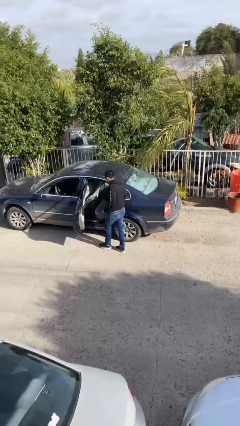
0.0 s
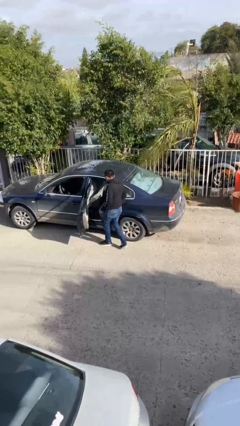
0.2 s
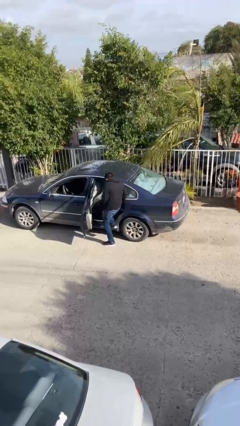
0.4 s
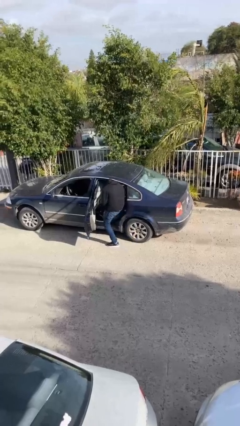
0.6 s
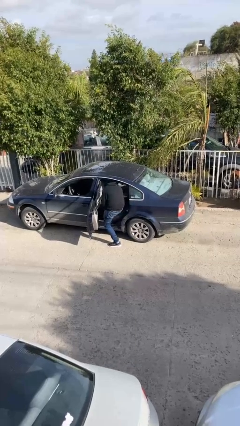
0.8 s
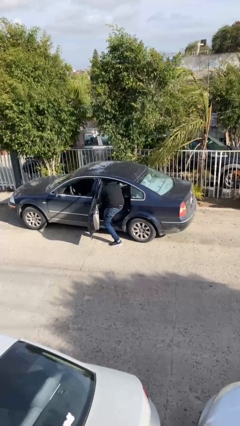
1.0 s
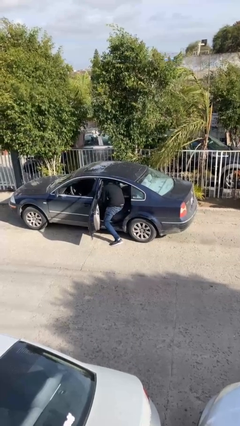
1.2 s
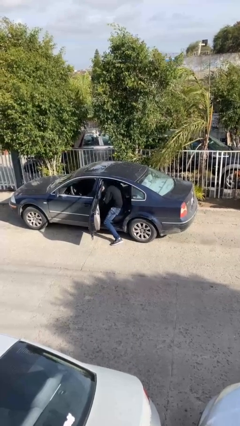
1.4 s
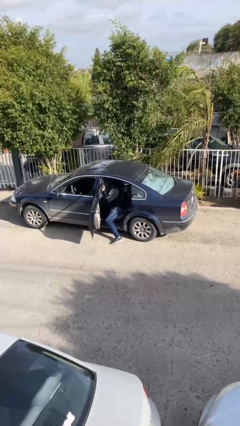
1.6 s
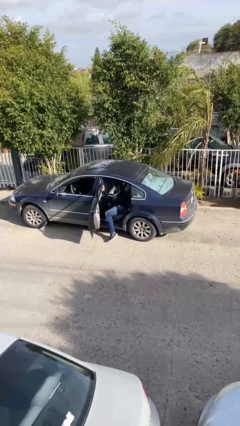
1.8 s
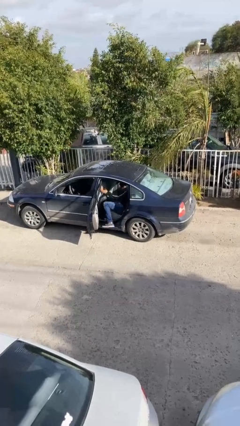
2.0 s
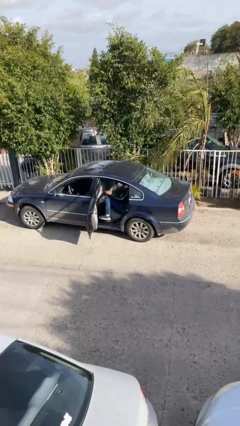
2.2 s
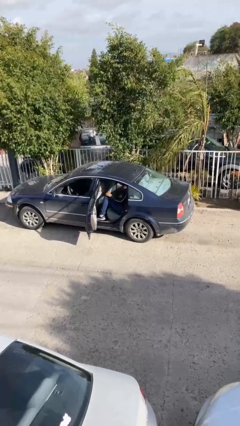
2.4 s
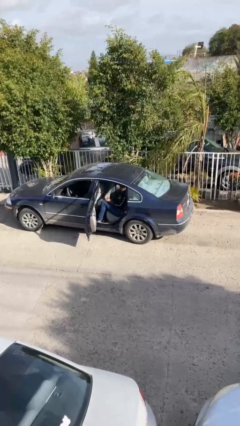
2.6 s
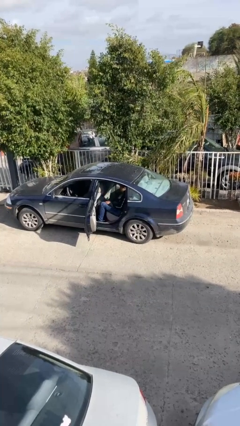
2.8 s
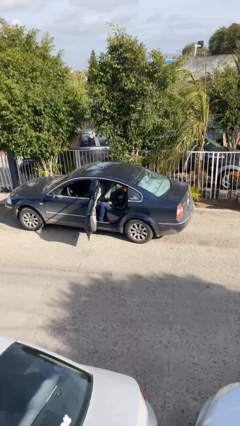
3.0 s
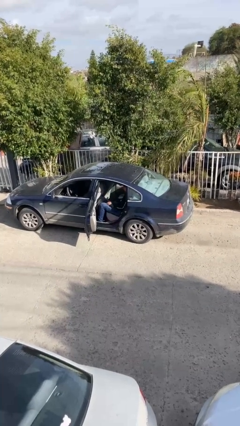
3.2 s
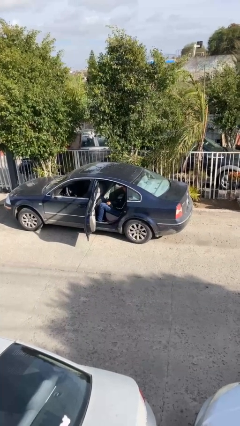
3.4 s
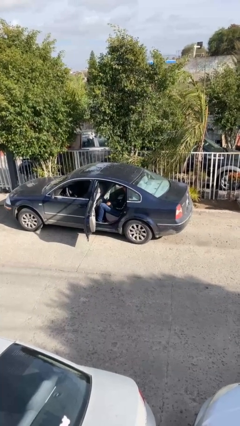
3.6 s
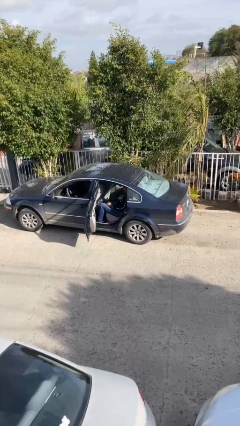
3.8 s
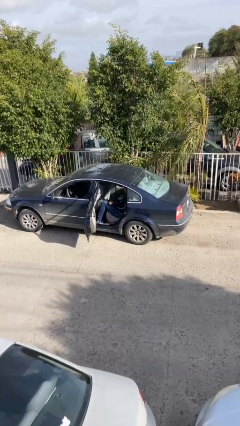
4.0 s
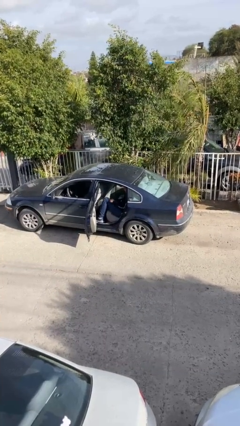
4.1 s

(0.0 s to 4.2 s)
person enters car

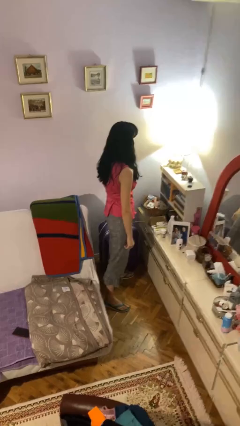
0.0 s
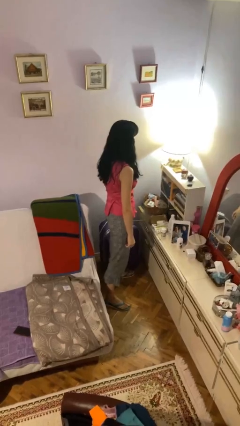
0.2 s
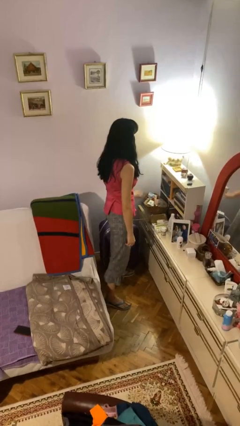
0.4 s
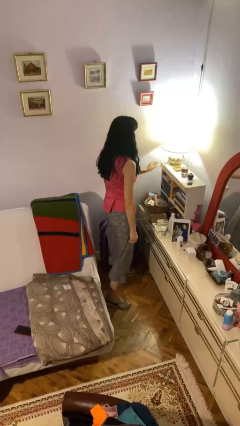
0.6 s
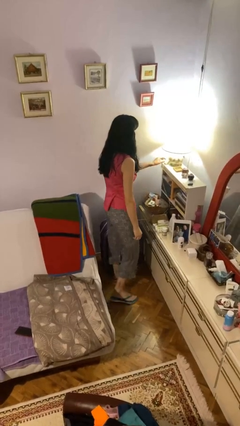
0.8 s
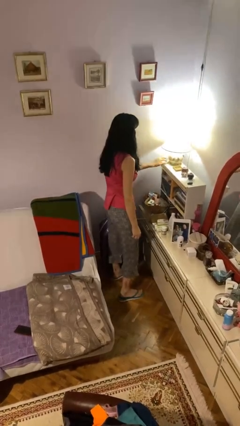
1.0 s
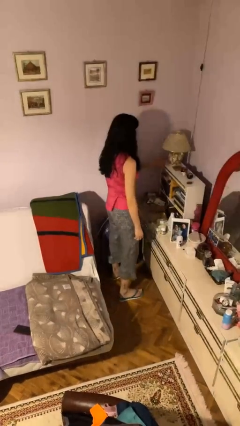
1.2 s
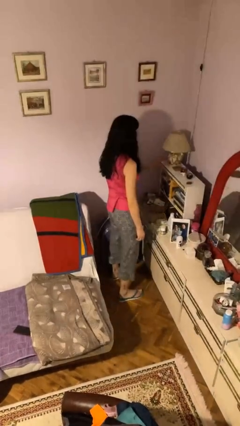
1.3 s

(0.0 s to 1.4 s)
person turns off lamp

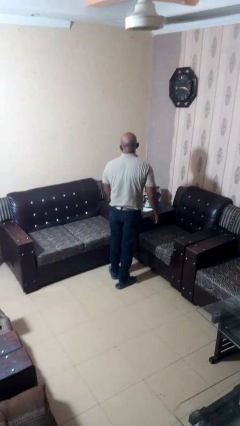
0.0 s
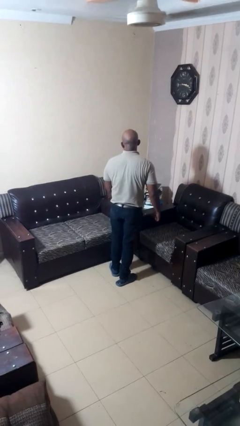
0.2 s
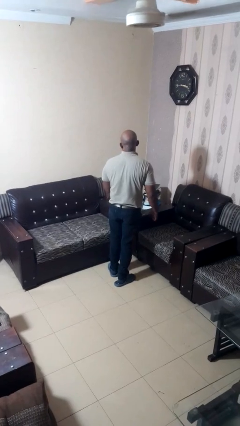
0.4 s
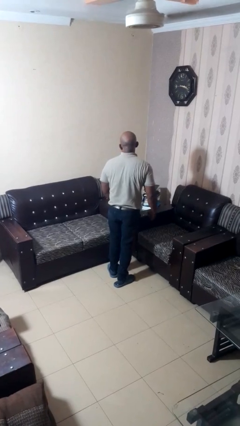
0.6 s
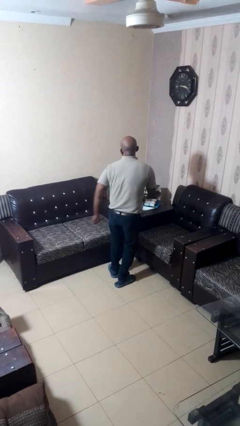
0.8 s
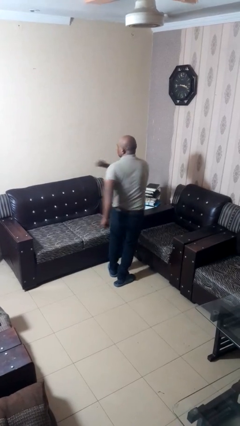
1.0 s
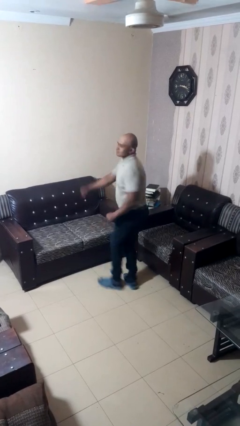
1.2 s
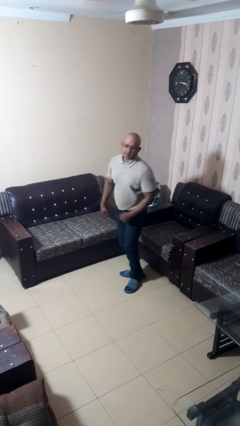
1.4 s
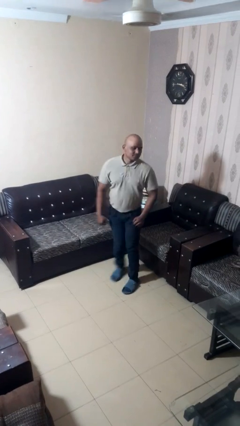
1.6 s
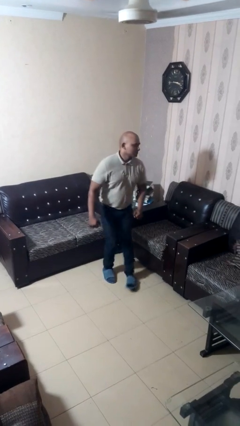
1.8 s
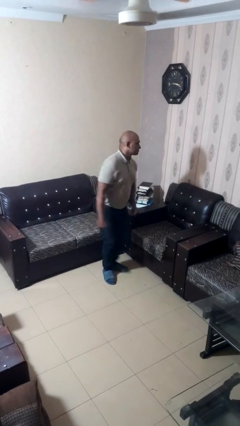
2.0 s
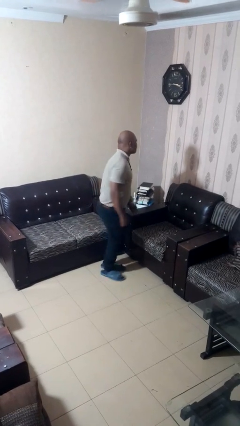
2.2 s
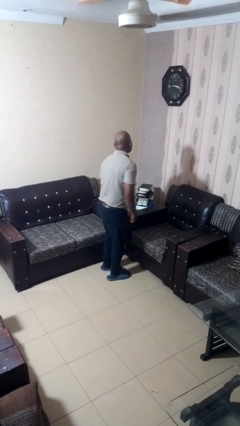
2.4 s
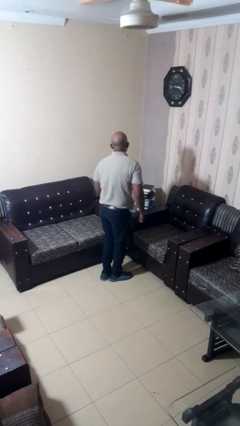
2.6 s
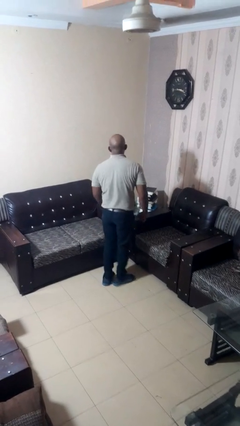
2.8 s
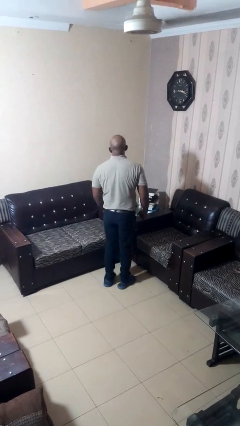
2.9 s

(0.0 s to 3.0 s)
person twirls

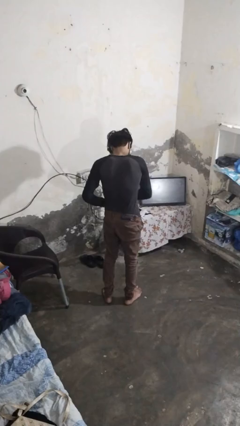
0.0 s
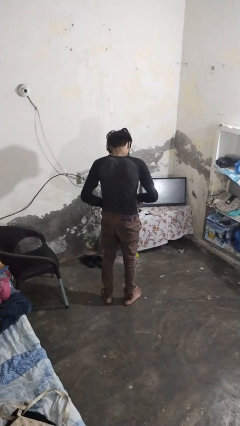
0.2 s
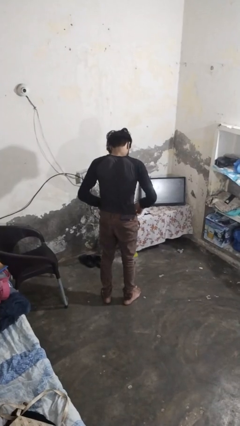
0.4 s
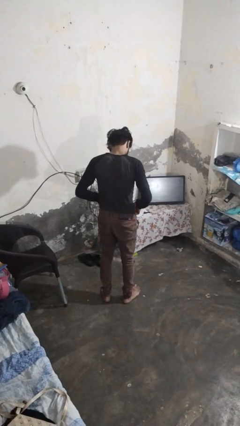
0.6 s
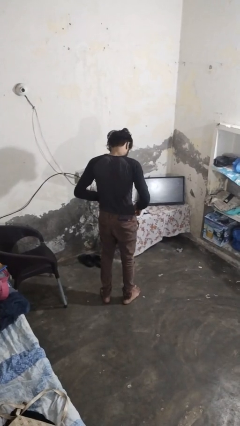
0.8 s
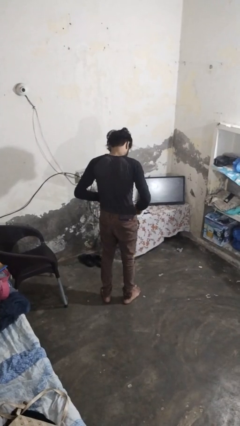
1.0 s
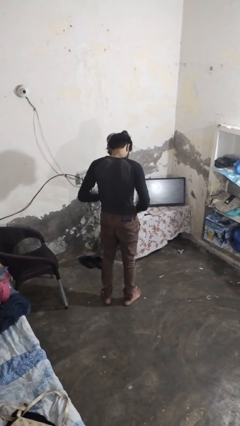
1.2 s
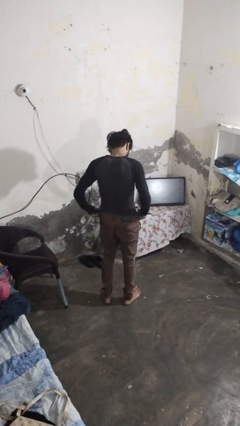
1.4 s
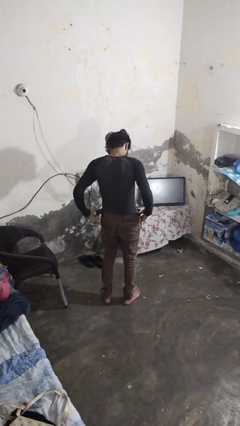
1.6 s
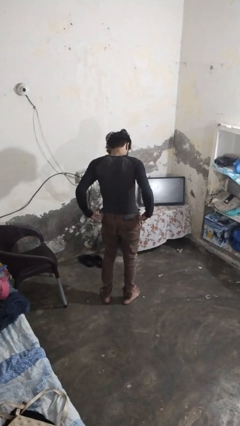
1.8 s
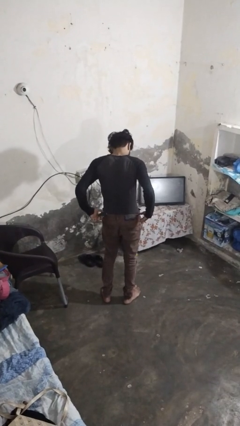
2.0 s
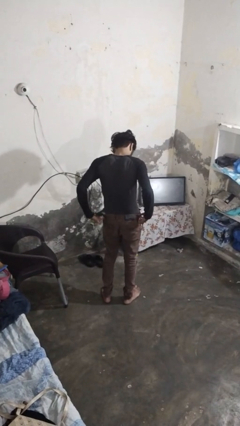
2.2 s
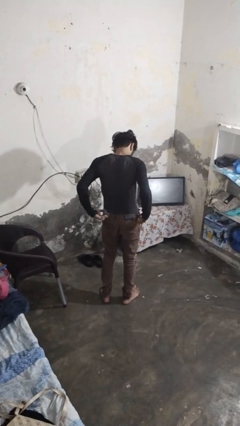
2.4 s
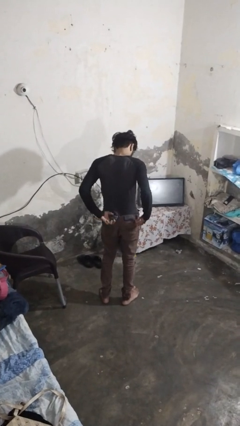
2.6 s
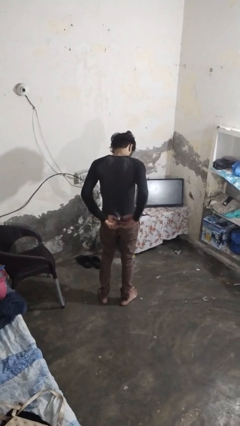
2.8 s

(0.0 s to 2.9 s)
person untucks shirt

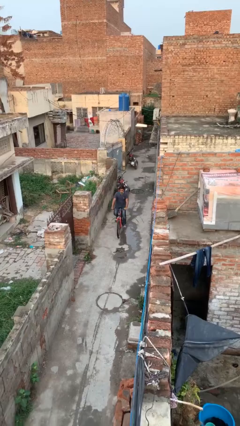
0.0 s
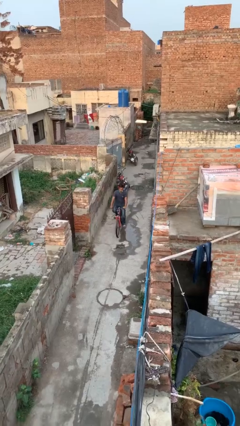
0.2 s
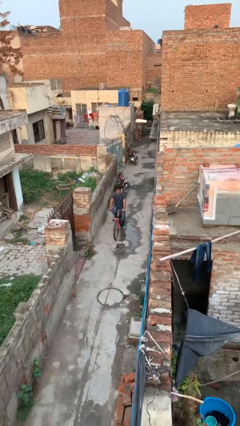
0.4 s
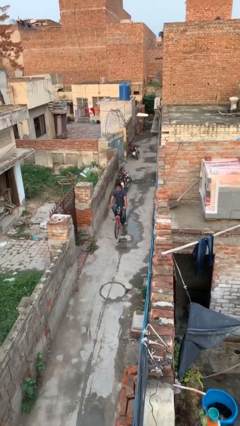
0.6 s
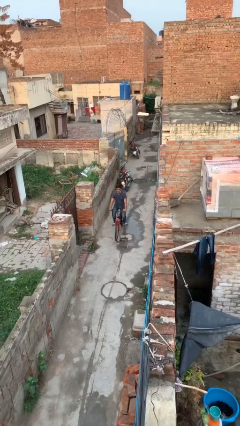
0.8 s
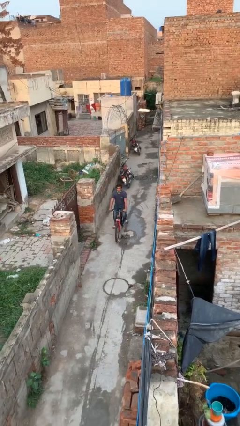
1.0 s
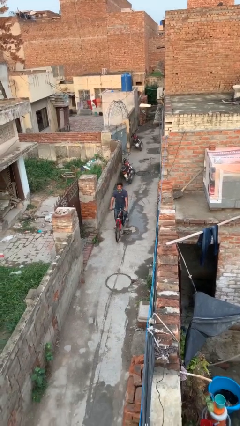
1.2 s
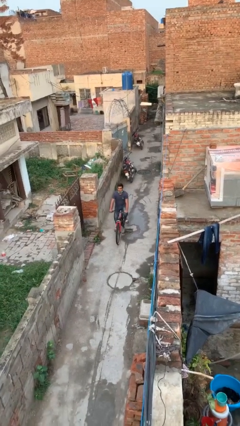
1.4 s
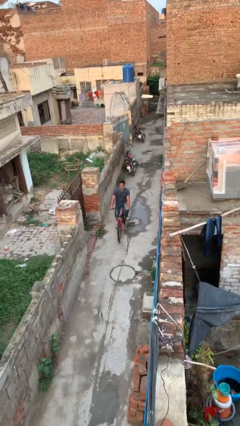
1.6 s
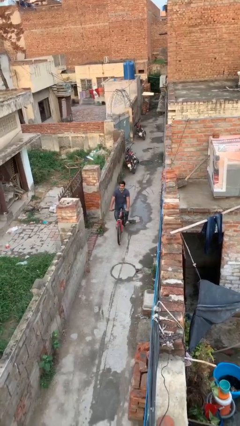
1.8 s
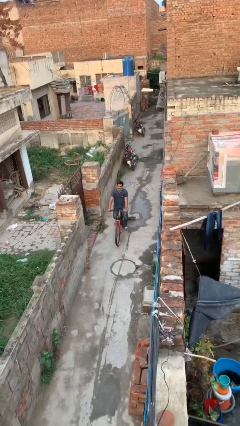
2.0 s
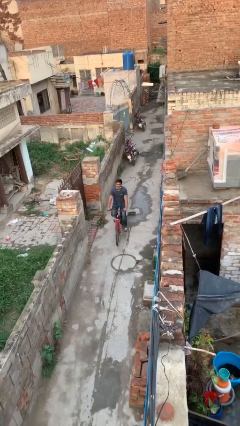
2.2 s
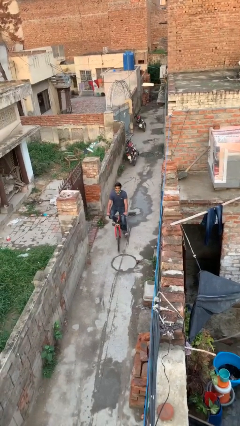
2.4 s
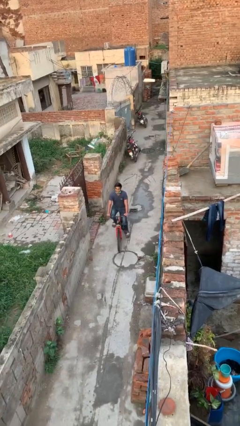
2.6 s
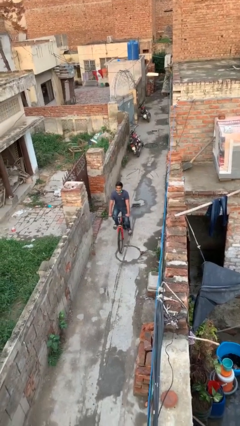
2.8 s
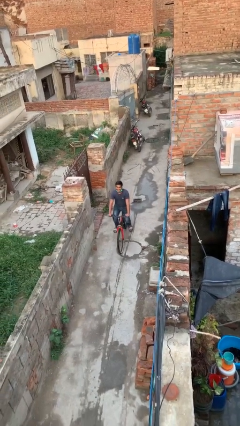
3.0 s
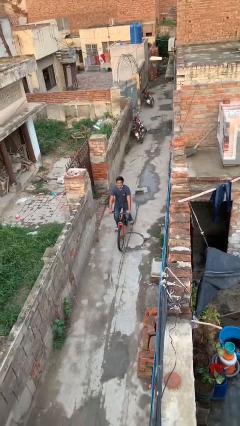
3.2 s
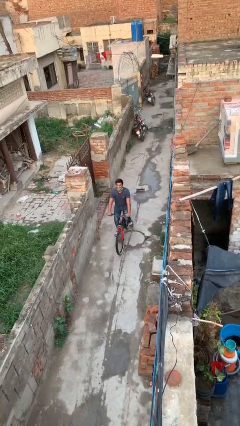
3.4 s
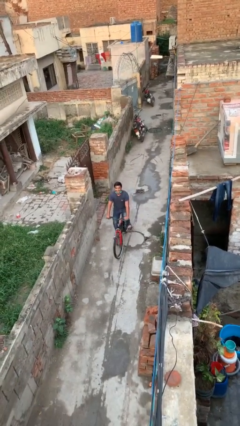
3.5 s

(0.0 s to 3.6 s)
person rides bicycle

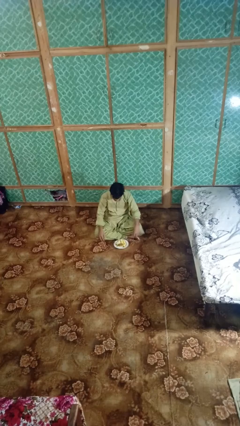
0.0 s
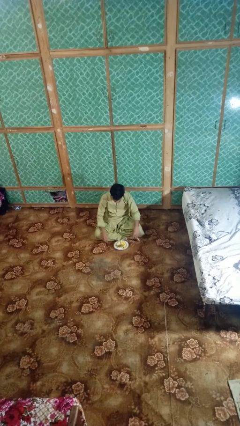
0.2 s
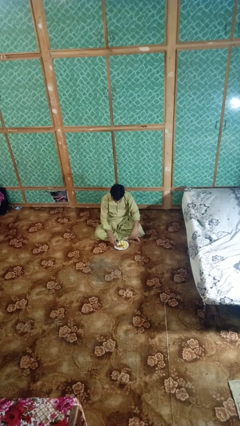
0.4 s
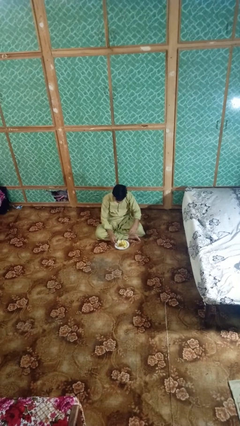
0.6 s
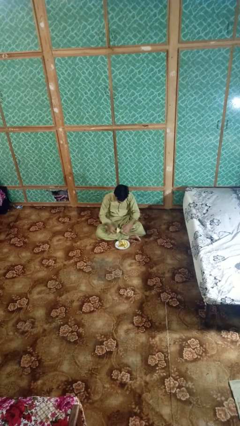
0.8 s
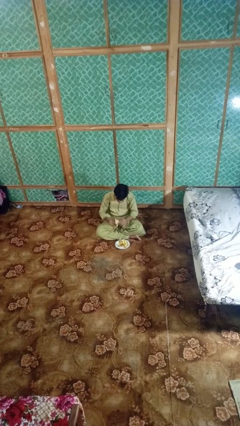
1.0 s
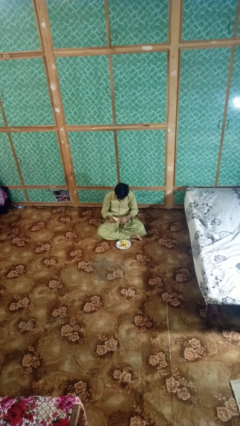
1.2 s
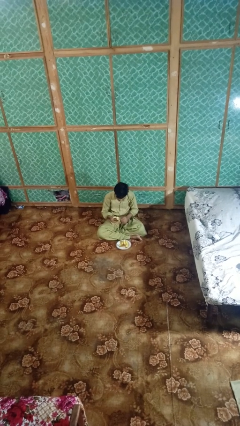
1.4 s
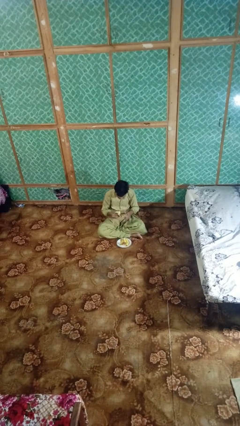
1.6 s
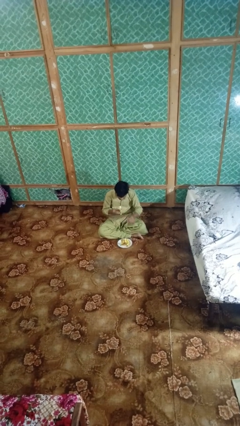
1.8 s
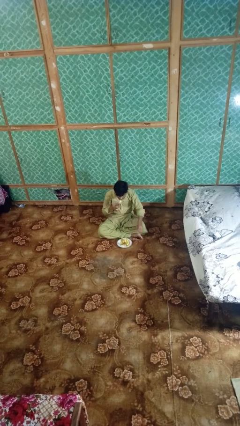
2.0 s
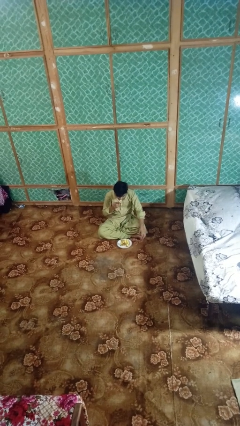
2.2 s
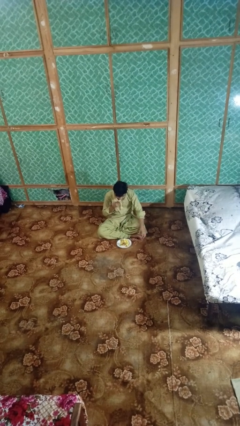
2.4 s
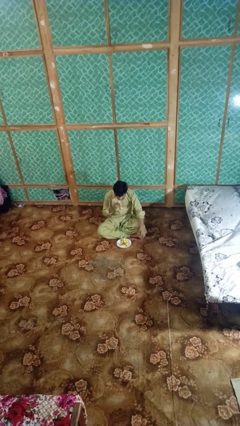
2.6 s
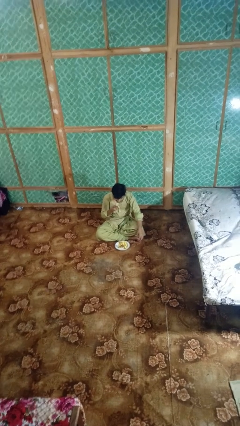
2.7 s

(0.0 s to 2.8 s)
person eats banana
